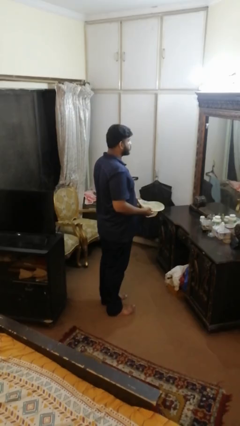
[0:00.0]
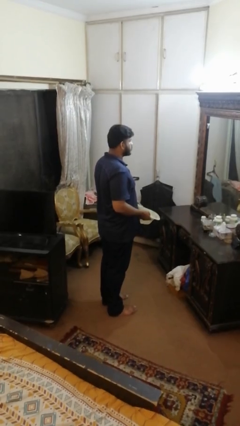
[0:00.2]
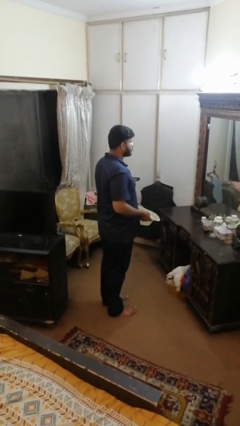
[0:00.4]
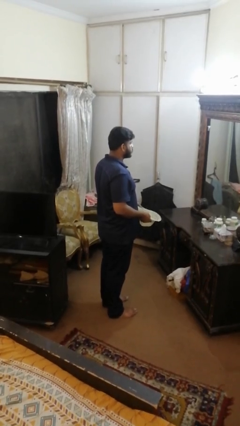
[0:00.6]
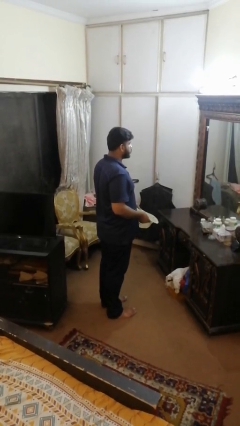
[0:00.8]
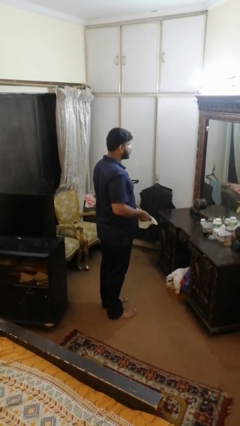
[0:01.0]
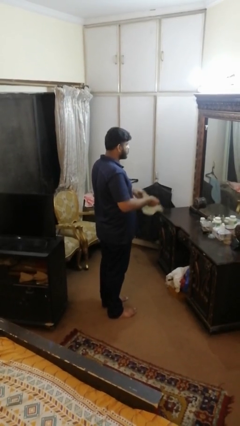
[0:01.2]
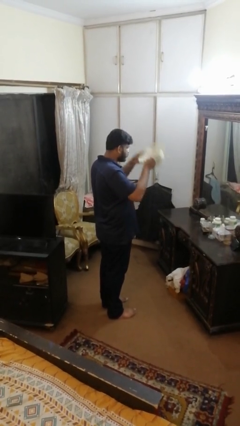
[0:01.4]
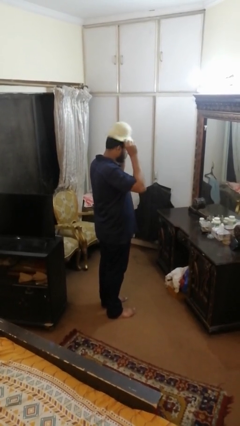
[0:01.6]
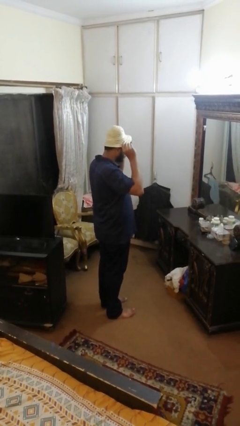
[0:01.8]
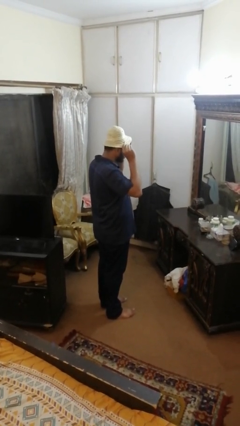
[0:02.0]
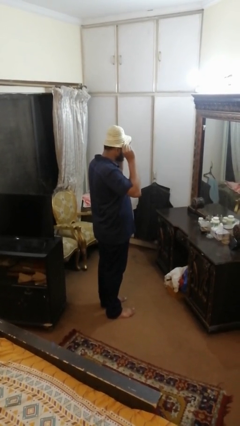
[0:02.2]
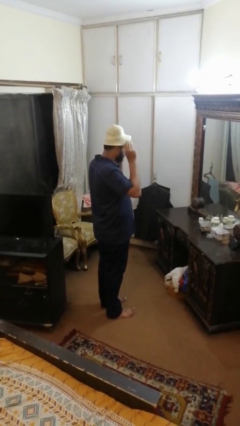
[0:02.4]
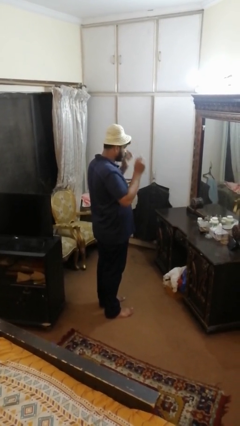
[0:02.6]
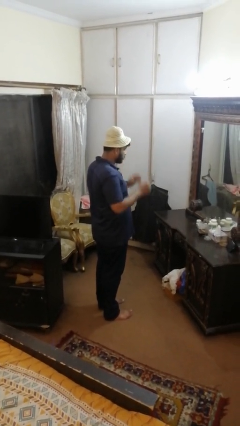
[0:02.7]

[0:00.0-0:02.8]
person puts on hat

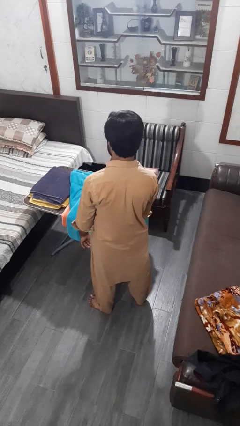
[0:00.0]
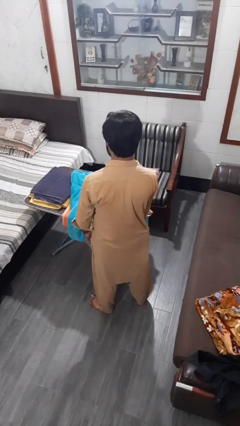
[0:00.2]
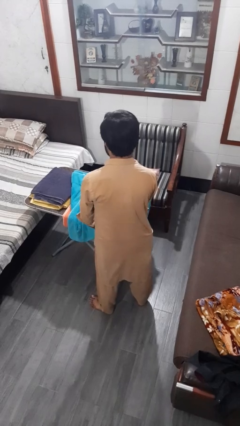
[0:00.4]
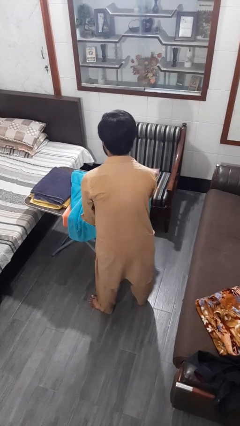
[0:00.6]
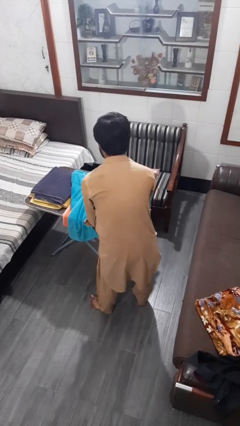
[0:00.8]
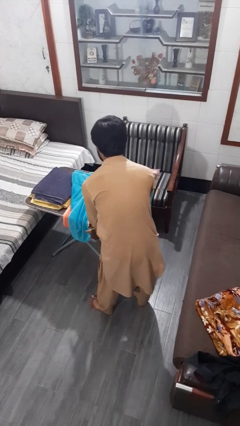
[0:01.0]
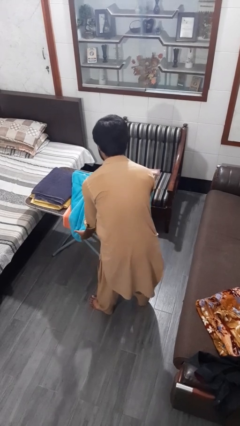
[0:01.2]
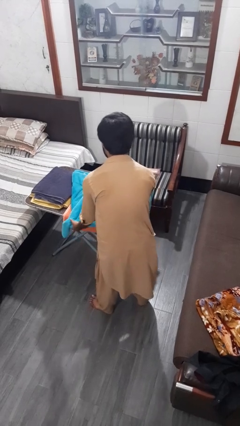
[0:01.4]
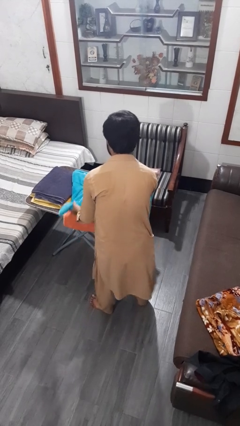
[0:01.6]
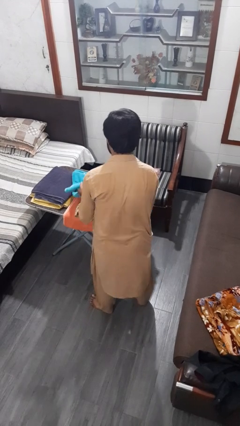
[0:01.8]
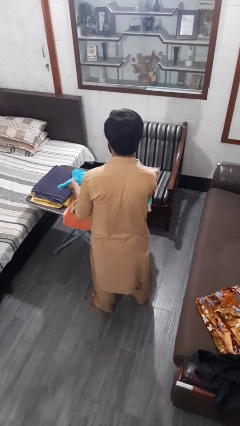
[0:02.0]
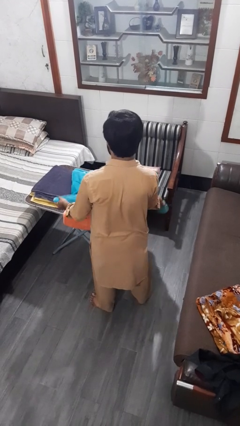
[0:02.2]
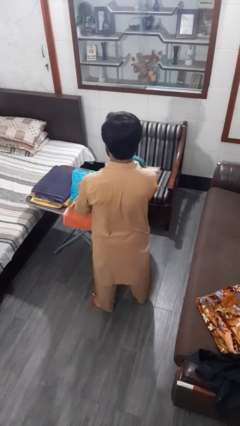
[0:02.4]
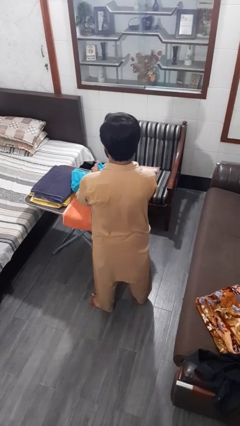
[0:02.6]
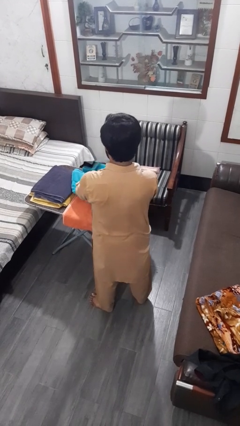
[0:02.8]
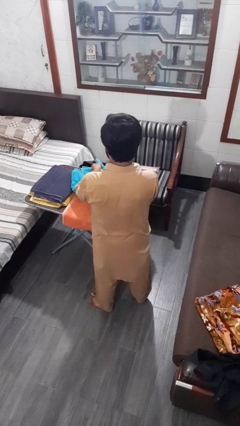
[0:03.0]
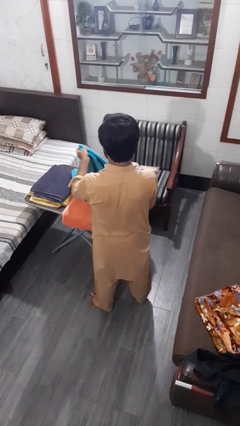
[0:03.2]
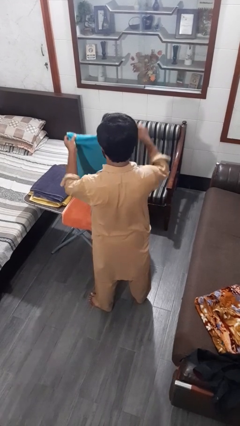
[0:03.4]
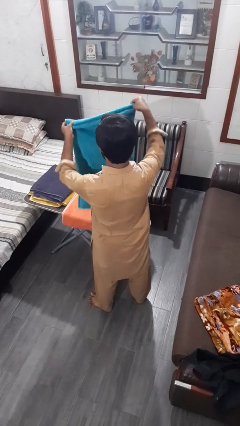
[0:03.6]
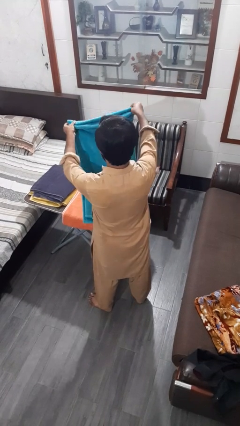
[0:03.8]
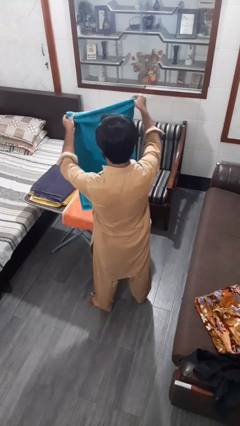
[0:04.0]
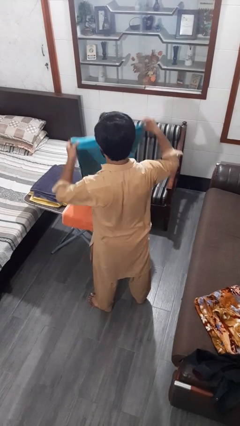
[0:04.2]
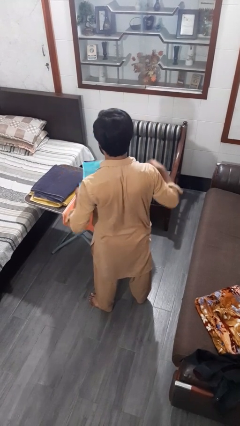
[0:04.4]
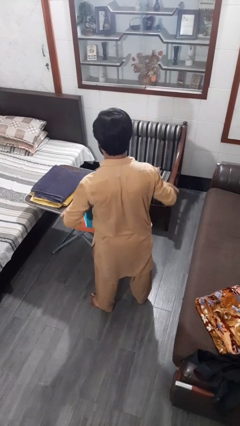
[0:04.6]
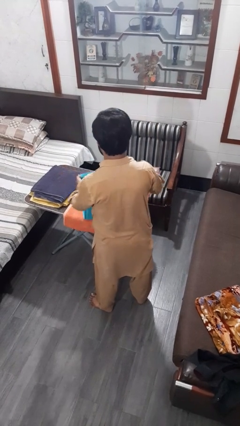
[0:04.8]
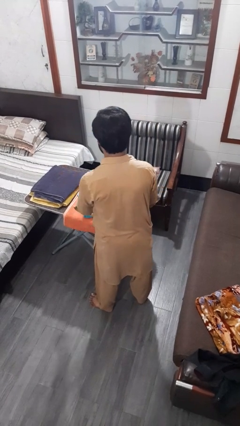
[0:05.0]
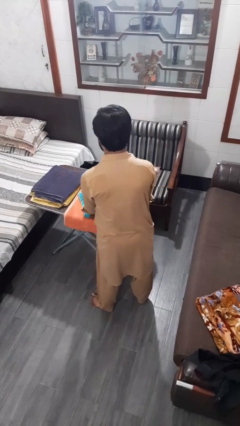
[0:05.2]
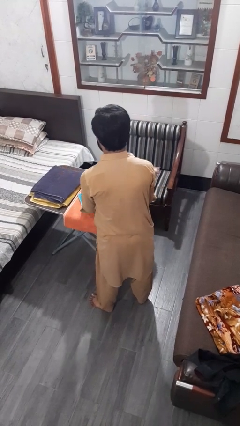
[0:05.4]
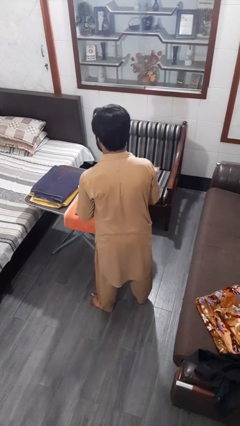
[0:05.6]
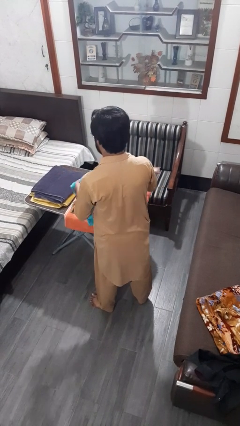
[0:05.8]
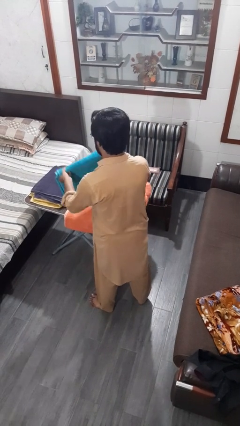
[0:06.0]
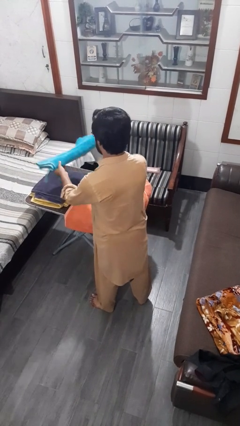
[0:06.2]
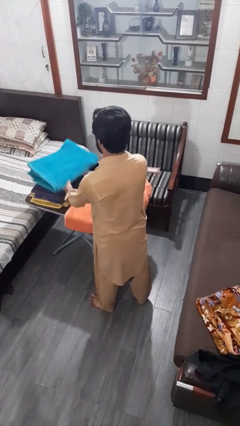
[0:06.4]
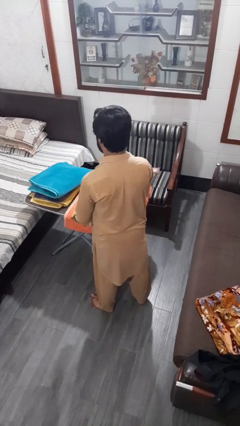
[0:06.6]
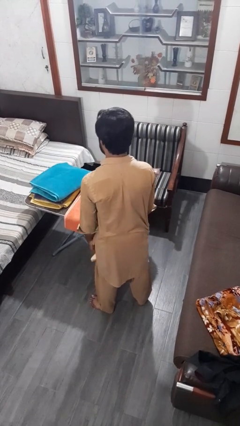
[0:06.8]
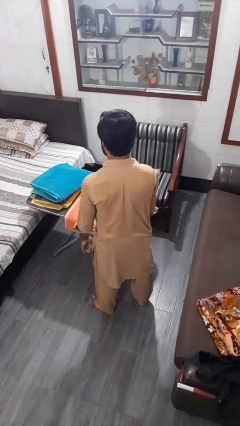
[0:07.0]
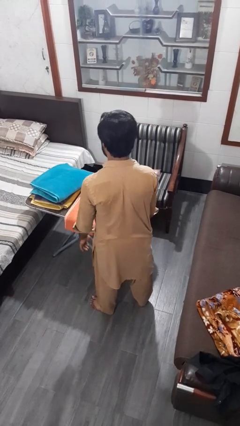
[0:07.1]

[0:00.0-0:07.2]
person folds towel

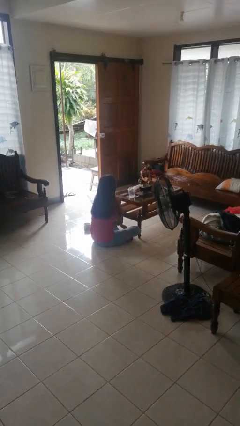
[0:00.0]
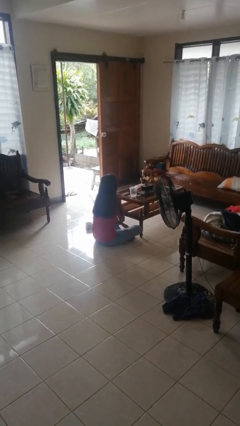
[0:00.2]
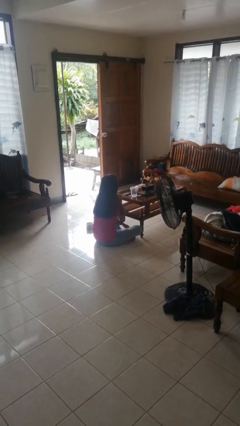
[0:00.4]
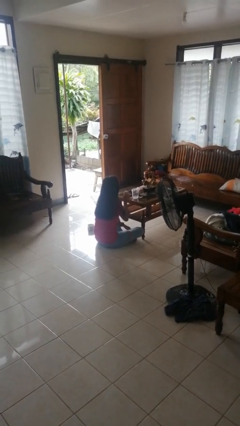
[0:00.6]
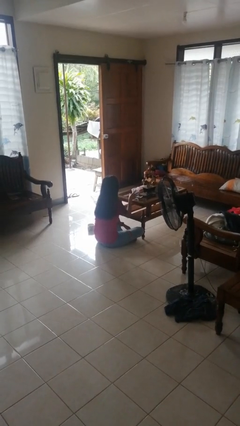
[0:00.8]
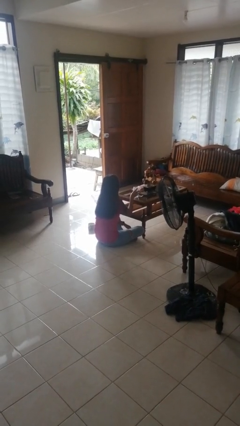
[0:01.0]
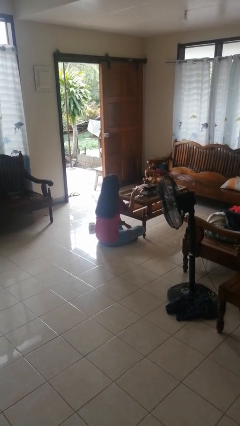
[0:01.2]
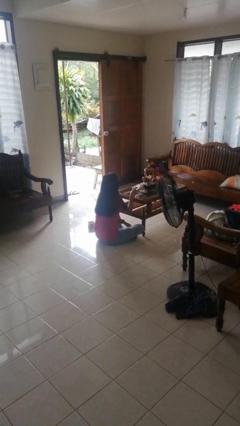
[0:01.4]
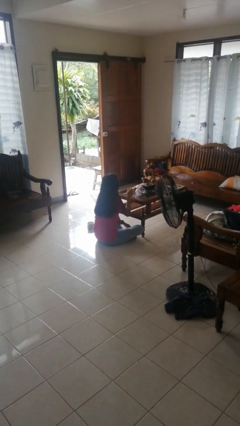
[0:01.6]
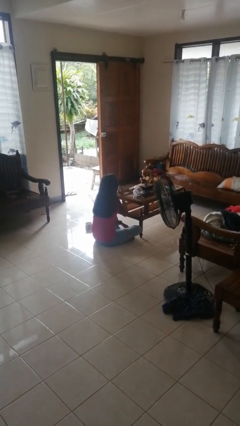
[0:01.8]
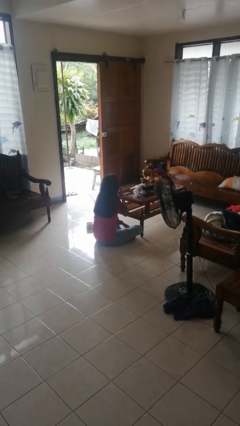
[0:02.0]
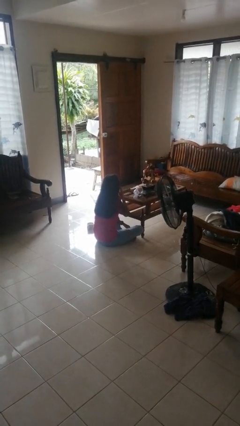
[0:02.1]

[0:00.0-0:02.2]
person knocks over glass

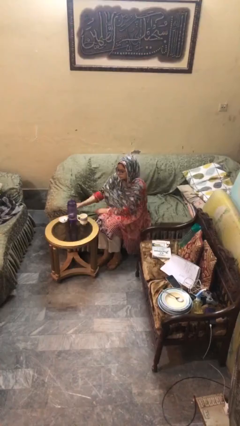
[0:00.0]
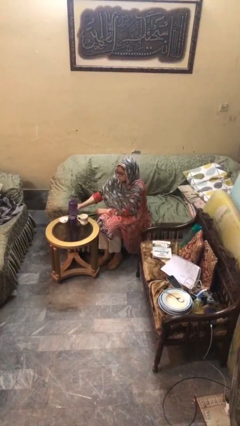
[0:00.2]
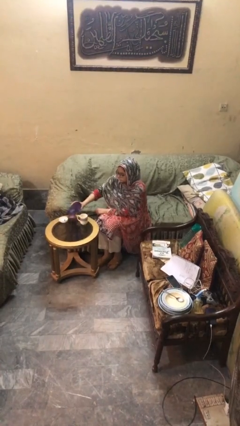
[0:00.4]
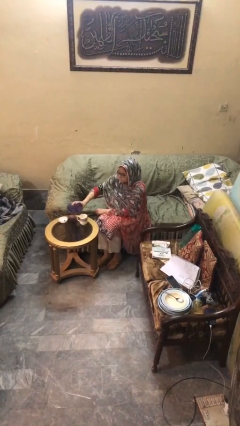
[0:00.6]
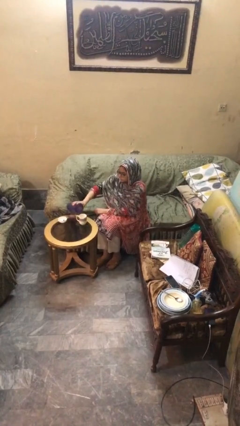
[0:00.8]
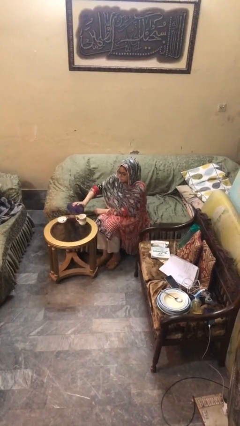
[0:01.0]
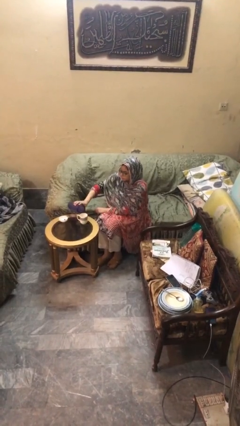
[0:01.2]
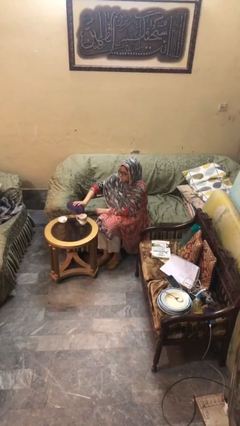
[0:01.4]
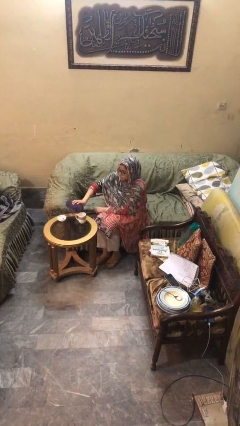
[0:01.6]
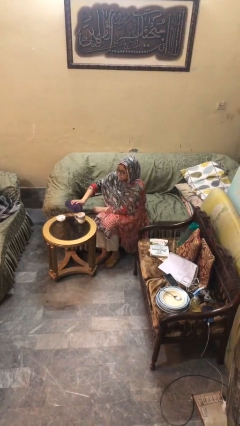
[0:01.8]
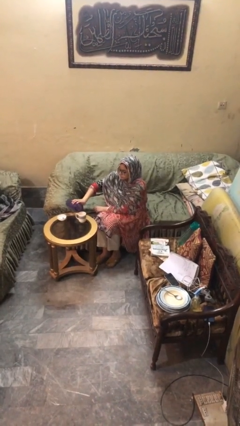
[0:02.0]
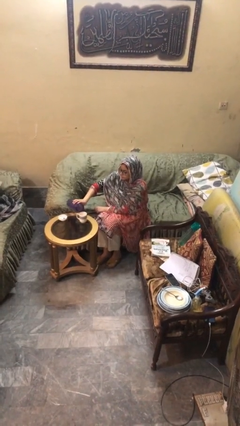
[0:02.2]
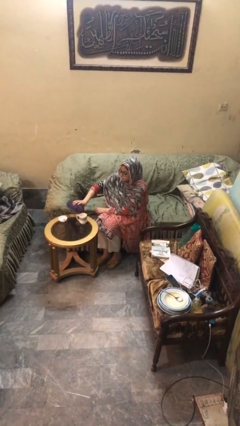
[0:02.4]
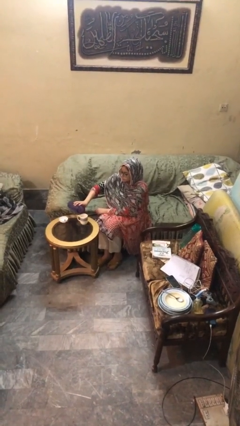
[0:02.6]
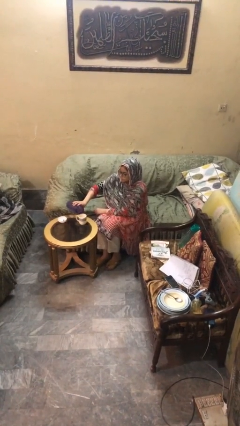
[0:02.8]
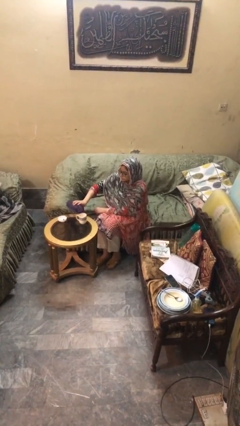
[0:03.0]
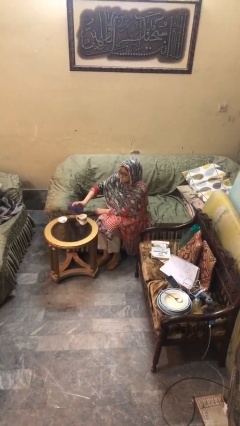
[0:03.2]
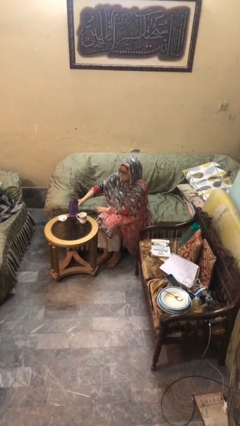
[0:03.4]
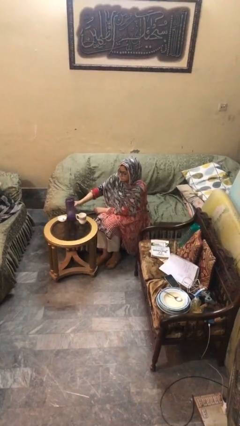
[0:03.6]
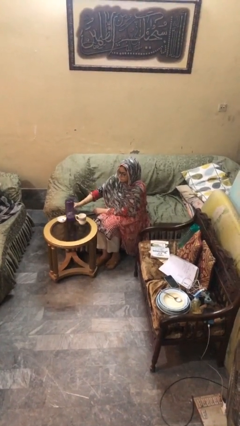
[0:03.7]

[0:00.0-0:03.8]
person pours liquid into cup

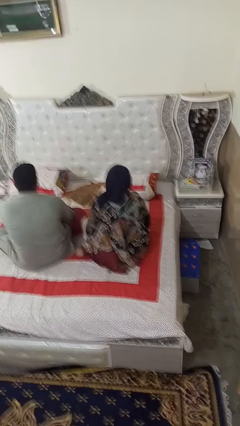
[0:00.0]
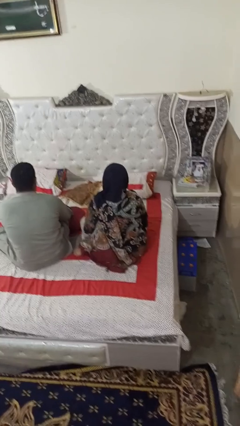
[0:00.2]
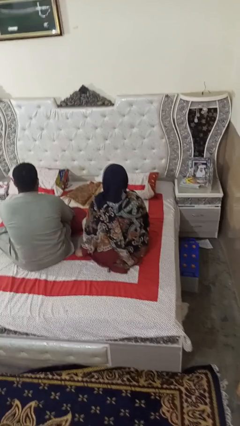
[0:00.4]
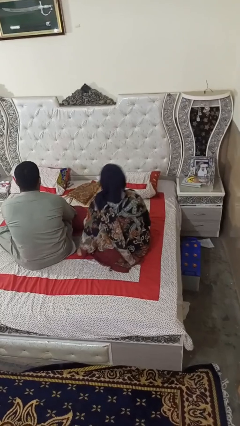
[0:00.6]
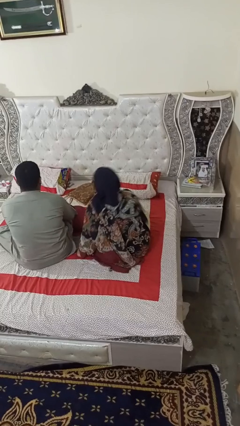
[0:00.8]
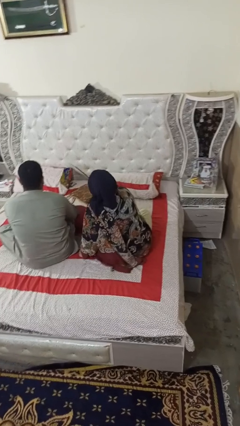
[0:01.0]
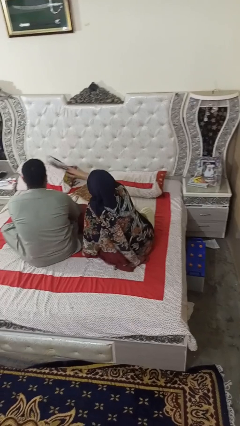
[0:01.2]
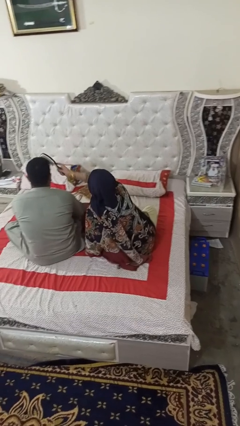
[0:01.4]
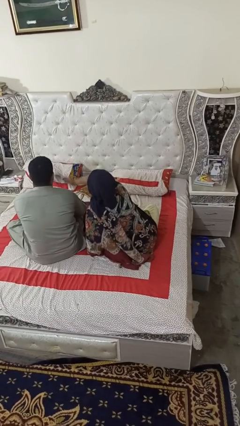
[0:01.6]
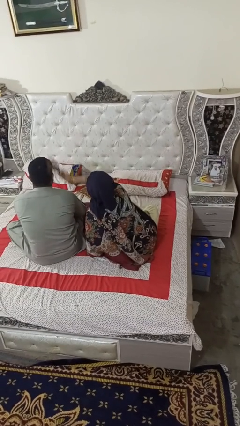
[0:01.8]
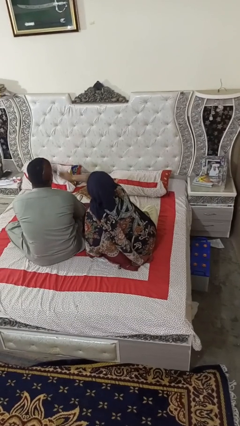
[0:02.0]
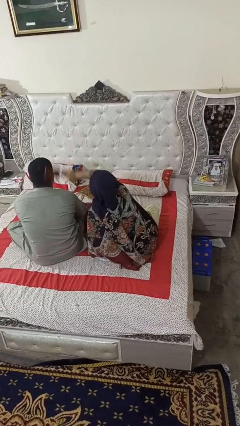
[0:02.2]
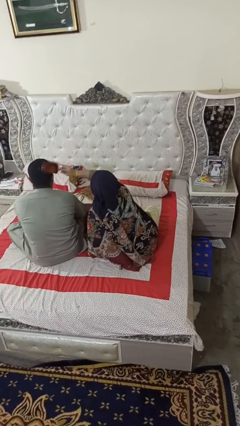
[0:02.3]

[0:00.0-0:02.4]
person brushes hair of person
